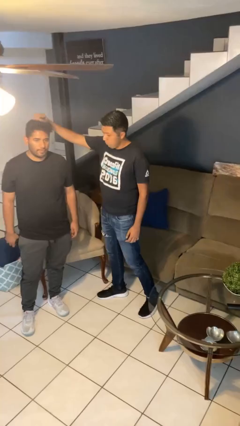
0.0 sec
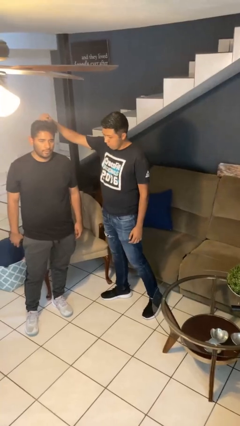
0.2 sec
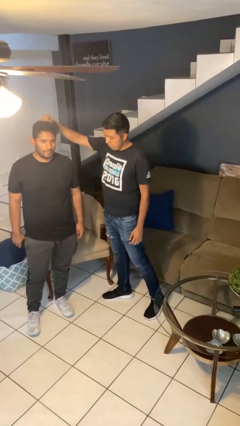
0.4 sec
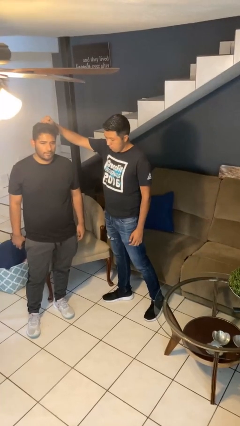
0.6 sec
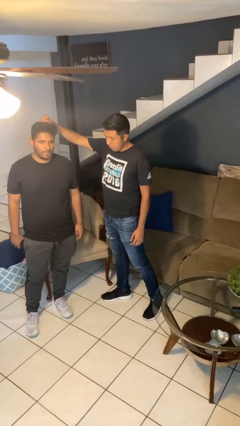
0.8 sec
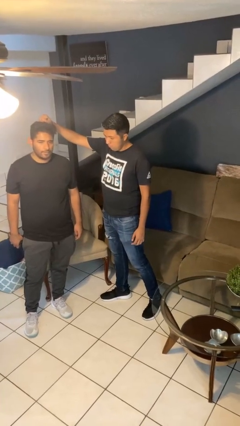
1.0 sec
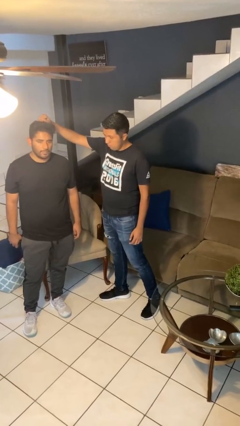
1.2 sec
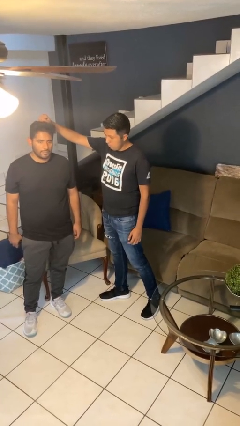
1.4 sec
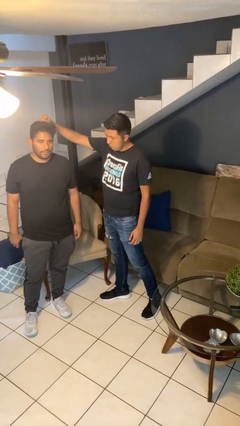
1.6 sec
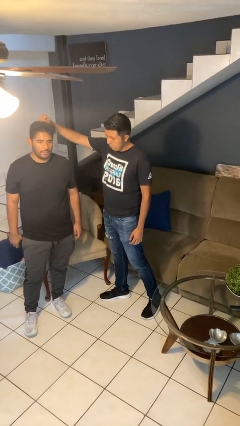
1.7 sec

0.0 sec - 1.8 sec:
person grabs person by hair

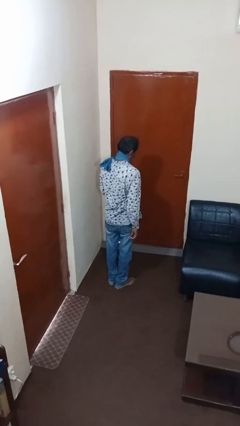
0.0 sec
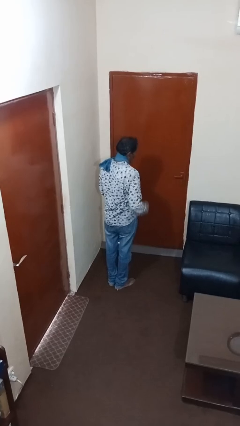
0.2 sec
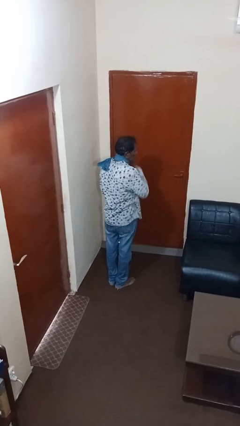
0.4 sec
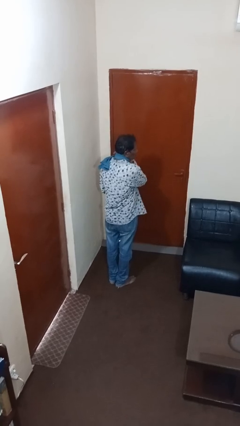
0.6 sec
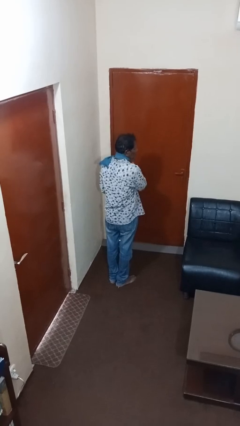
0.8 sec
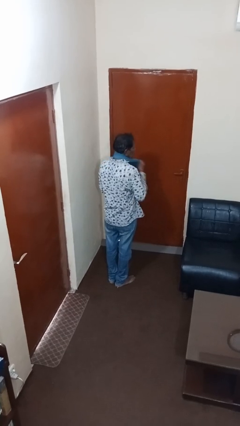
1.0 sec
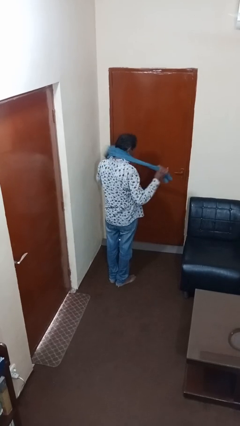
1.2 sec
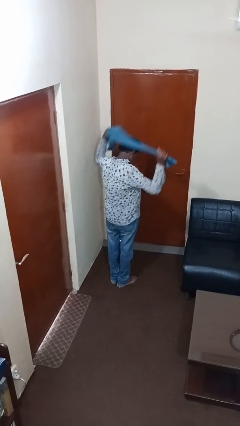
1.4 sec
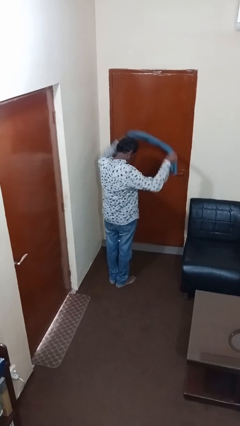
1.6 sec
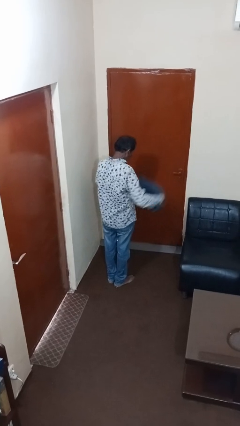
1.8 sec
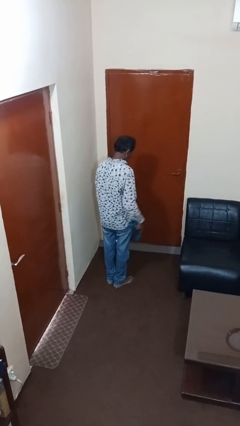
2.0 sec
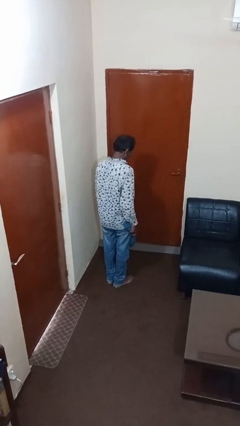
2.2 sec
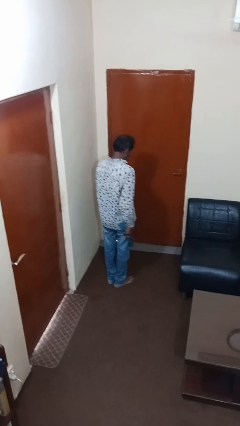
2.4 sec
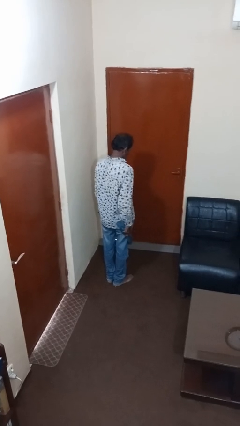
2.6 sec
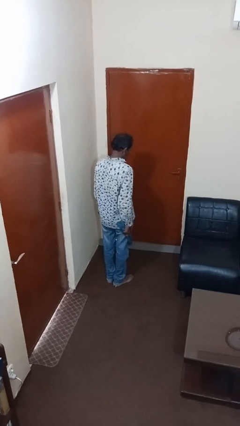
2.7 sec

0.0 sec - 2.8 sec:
person takes off scarf

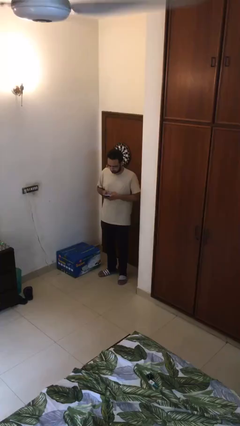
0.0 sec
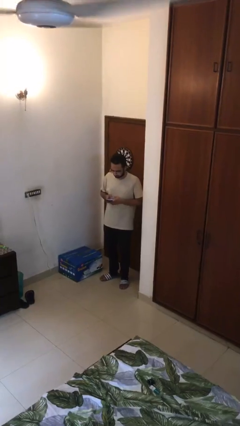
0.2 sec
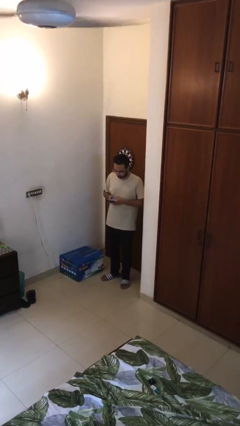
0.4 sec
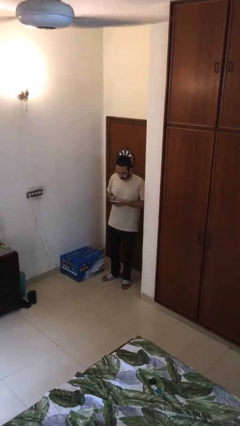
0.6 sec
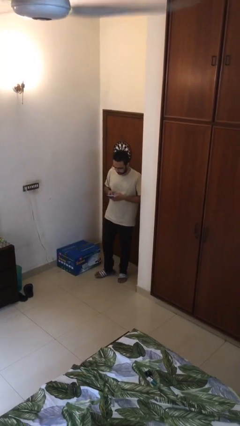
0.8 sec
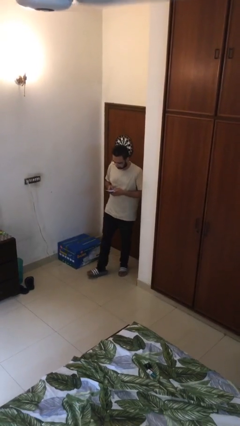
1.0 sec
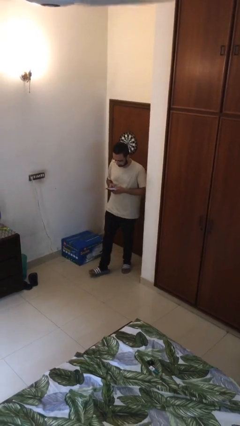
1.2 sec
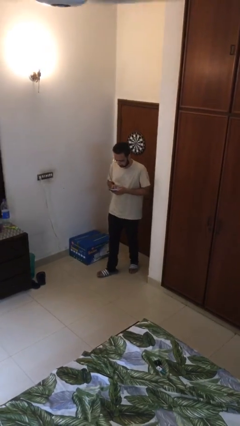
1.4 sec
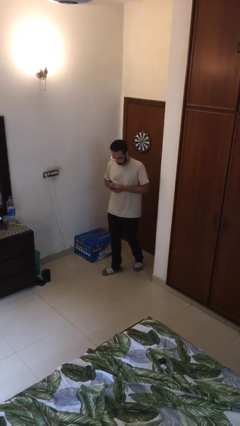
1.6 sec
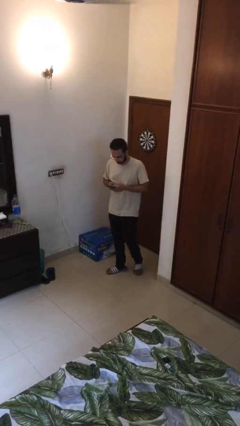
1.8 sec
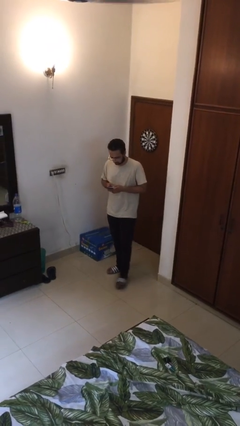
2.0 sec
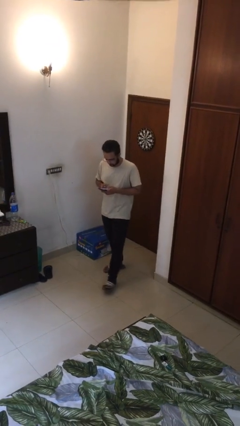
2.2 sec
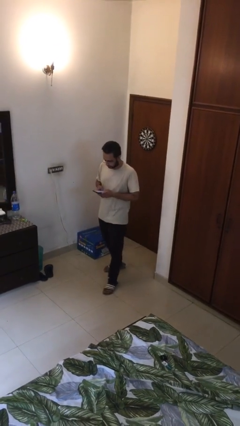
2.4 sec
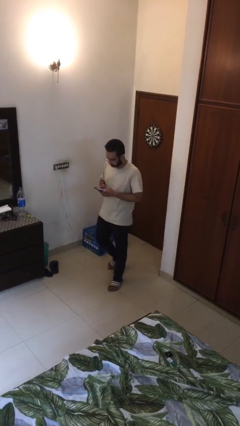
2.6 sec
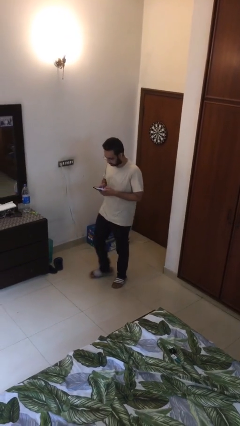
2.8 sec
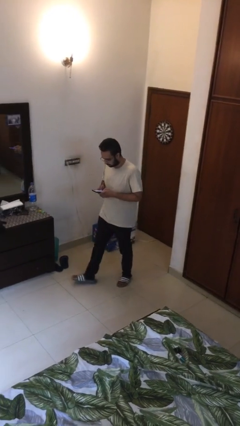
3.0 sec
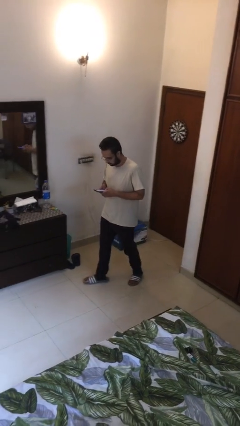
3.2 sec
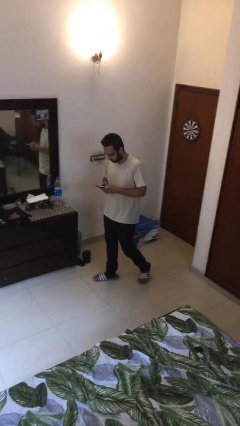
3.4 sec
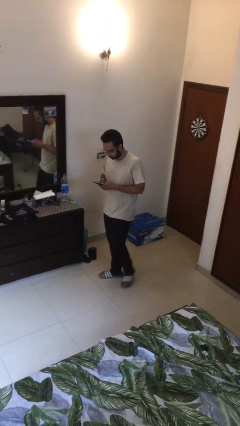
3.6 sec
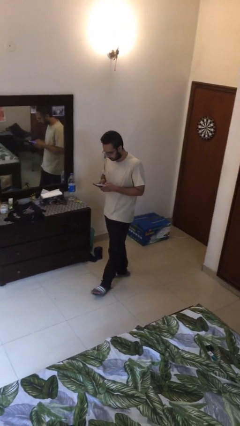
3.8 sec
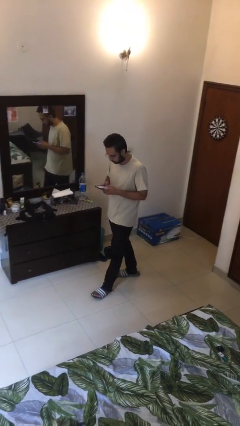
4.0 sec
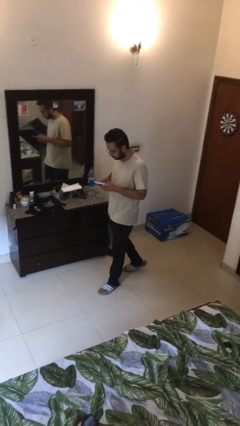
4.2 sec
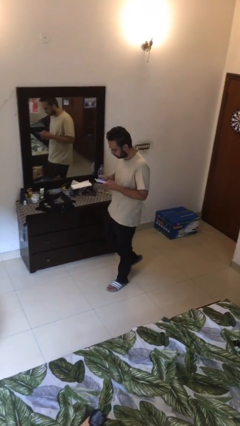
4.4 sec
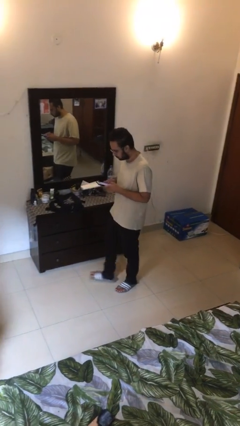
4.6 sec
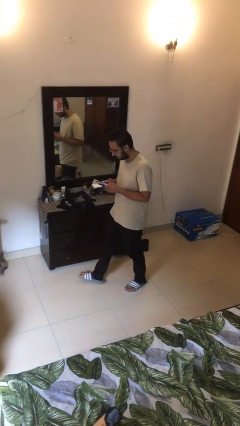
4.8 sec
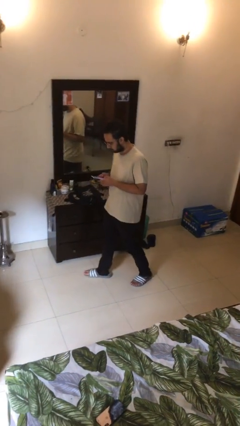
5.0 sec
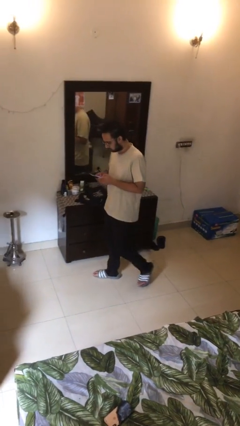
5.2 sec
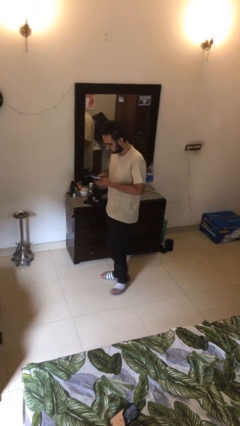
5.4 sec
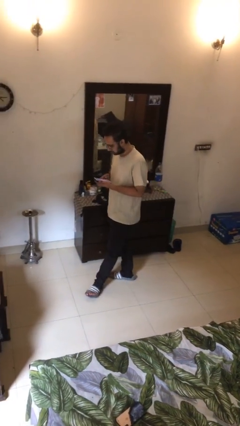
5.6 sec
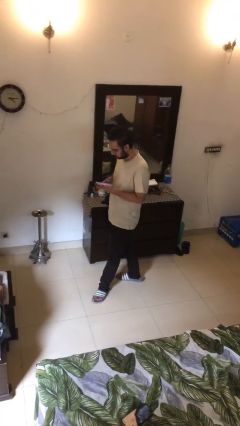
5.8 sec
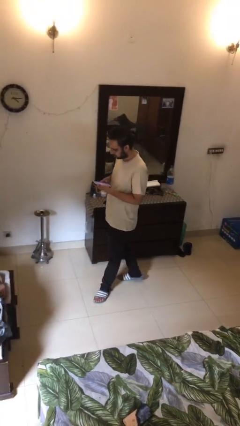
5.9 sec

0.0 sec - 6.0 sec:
person texts on phone

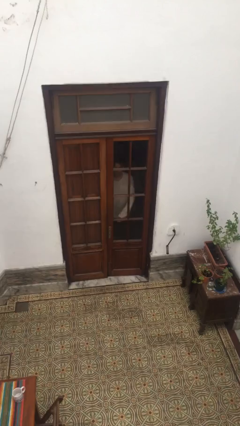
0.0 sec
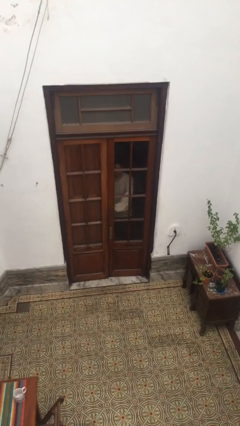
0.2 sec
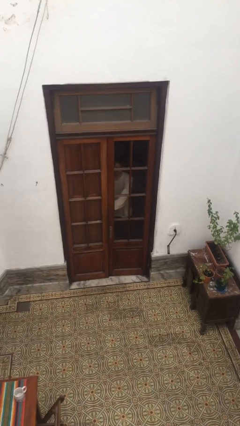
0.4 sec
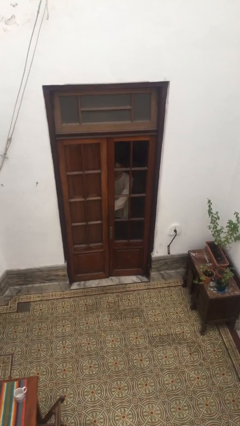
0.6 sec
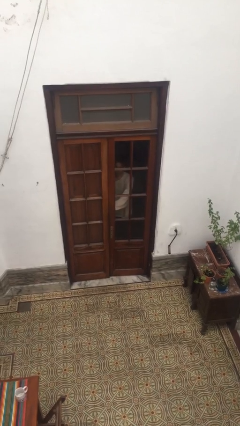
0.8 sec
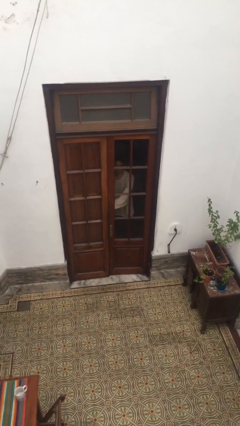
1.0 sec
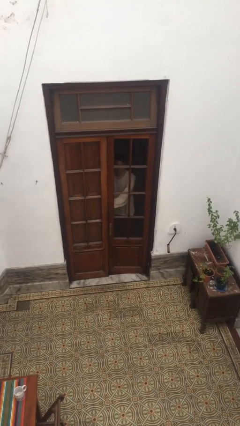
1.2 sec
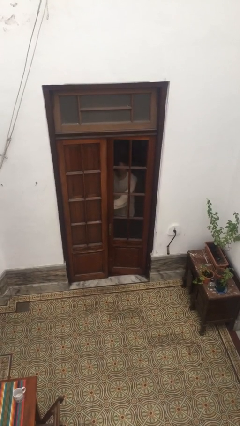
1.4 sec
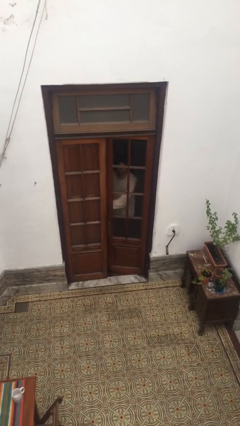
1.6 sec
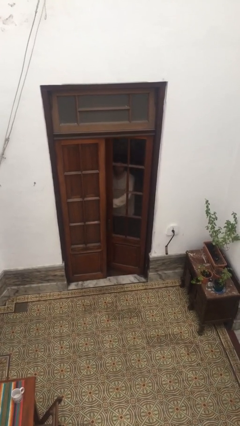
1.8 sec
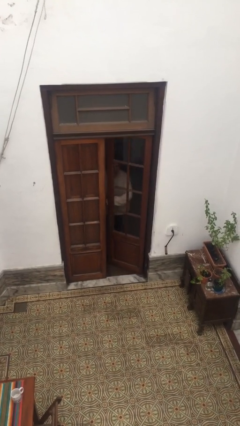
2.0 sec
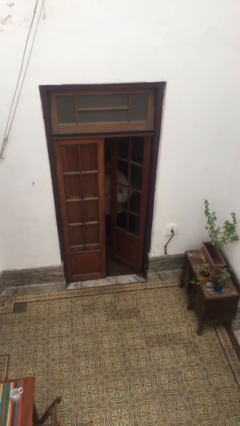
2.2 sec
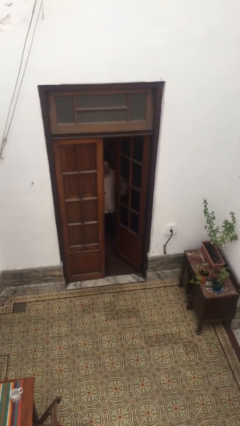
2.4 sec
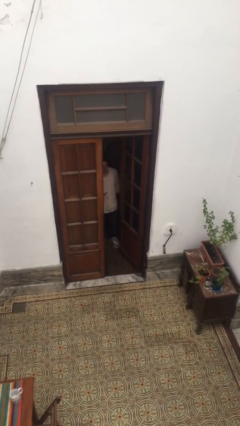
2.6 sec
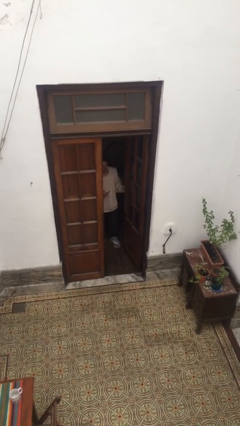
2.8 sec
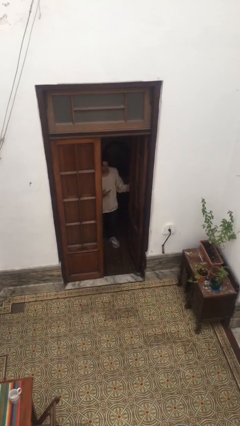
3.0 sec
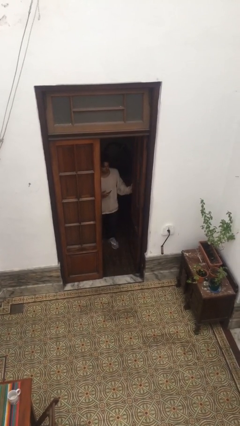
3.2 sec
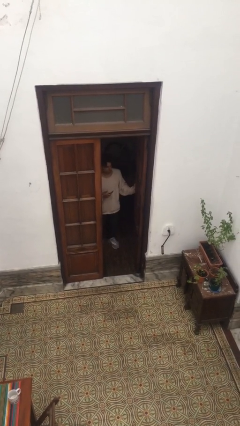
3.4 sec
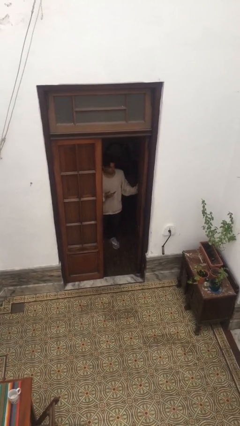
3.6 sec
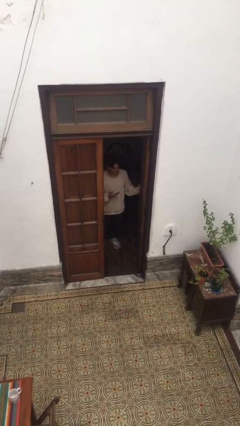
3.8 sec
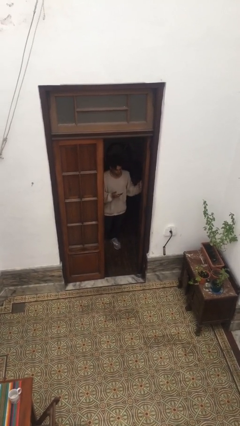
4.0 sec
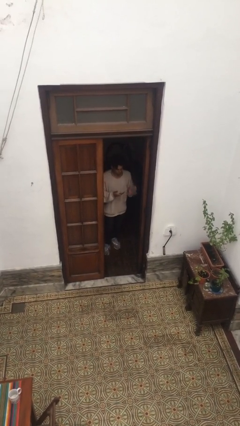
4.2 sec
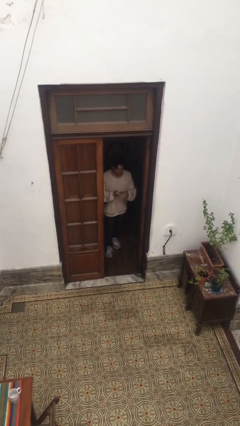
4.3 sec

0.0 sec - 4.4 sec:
person opens facility door

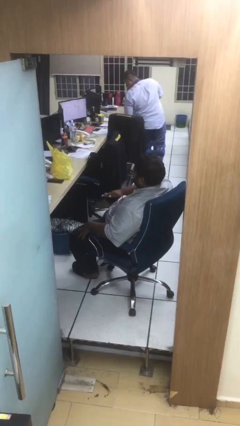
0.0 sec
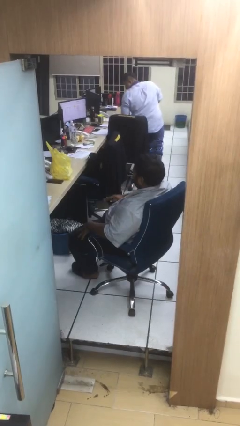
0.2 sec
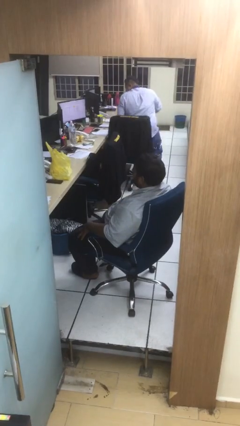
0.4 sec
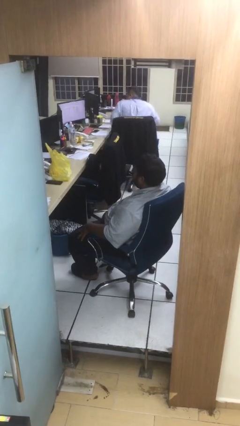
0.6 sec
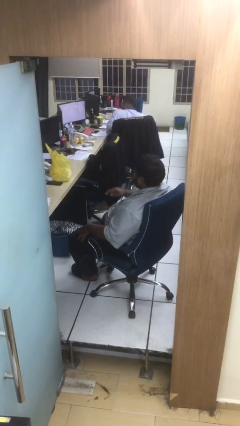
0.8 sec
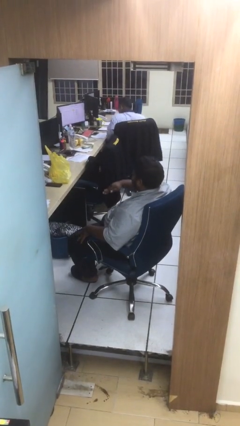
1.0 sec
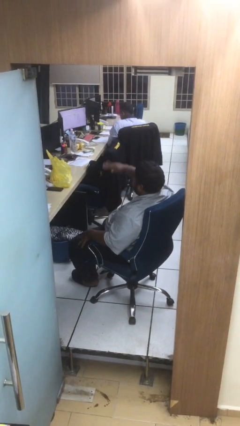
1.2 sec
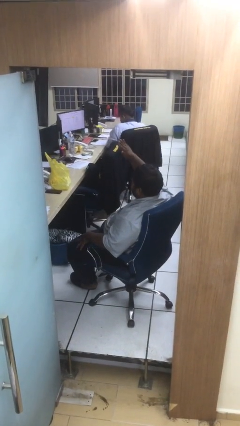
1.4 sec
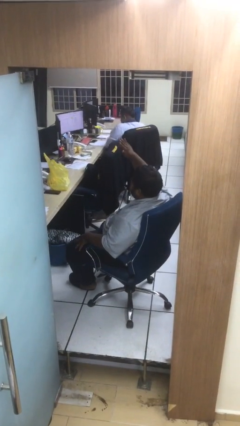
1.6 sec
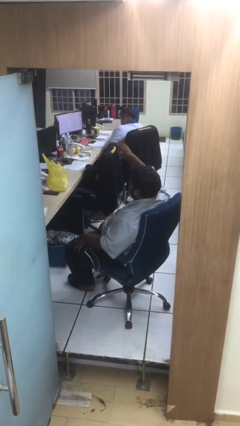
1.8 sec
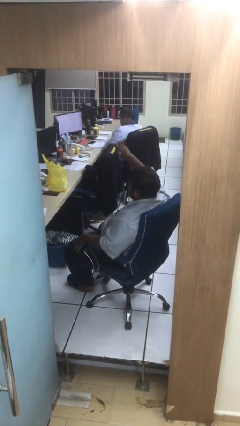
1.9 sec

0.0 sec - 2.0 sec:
person gestures swipe up

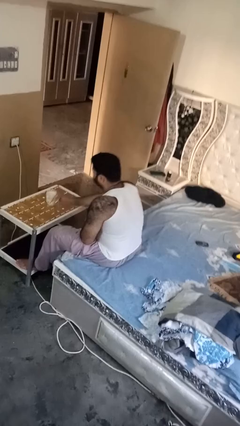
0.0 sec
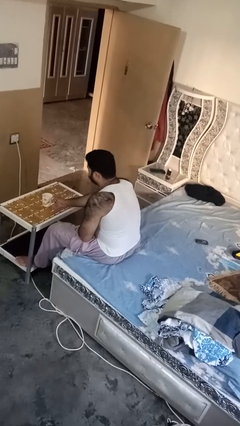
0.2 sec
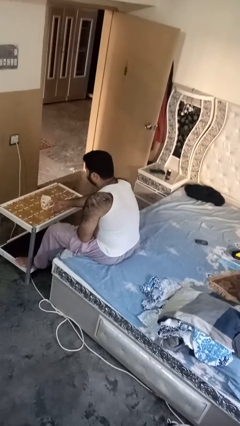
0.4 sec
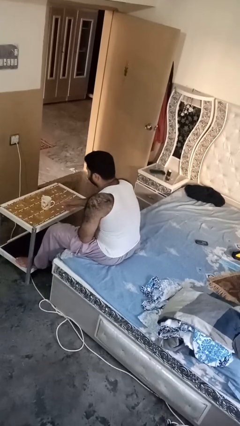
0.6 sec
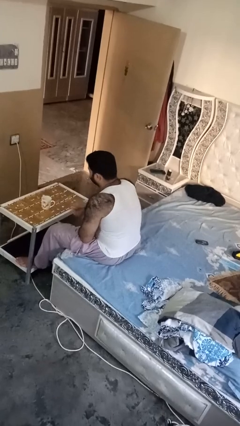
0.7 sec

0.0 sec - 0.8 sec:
person puts down object on table
